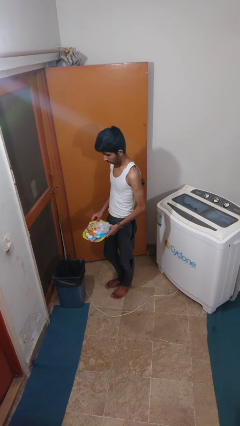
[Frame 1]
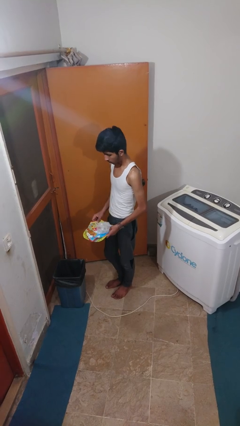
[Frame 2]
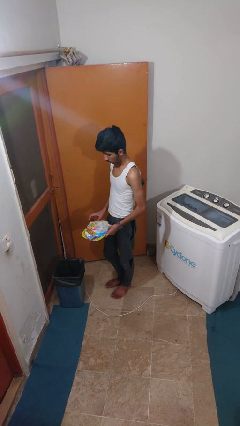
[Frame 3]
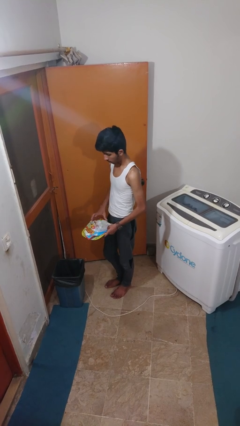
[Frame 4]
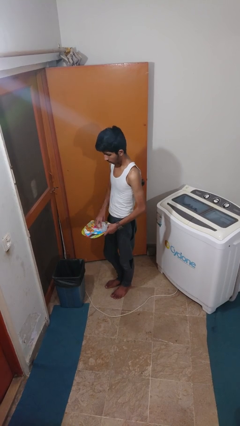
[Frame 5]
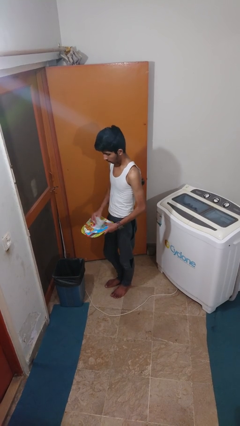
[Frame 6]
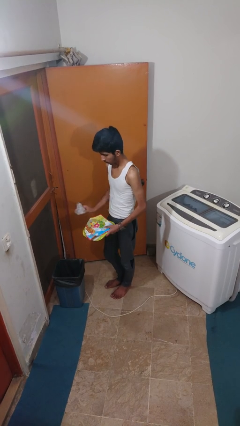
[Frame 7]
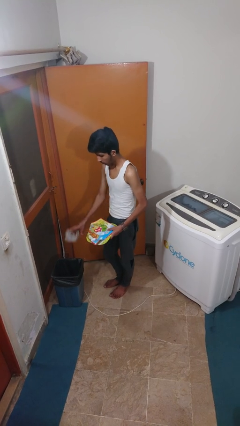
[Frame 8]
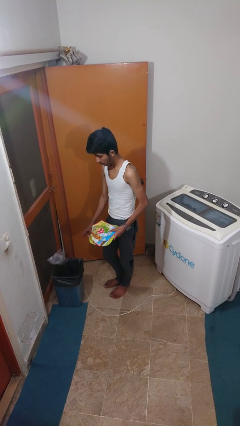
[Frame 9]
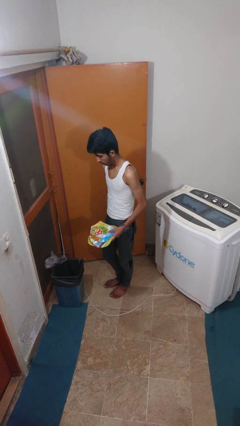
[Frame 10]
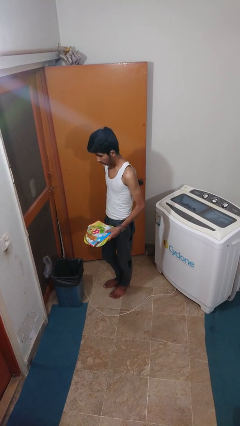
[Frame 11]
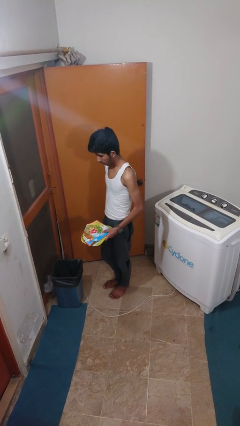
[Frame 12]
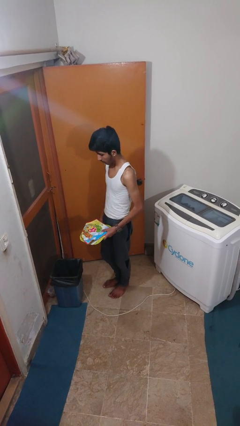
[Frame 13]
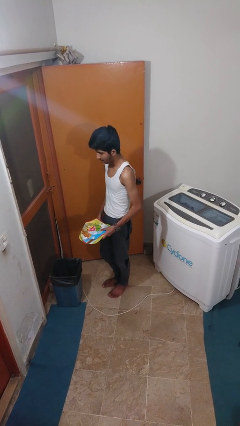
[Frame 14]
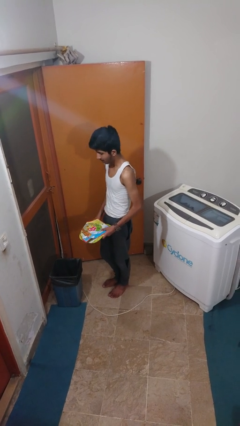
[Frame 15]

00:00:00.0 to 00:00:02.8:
person discards trash

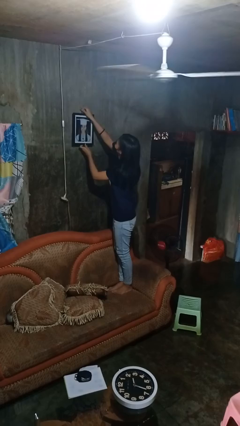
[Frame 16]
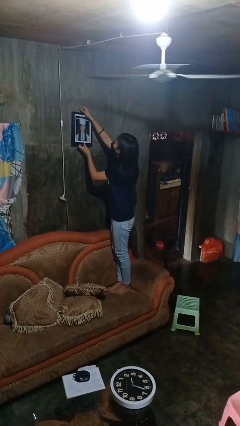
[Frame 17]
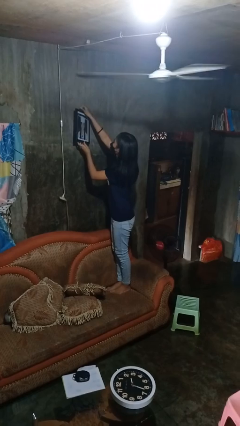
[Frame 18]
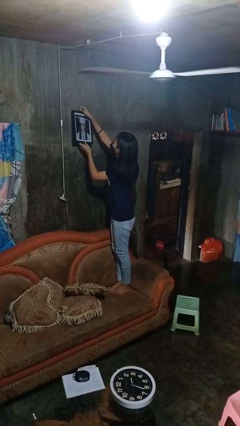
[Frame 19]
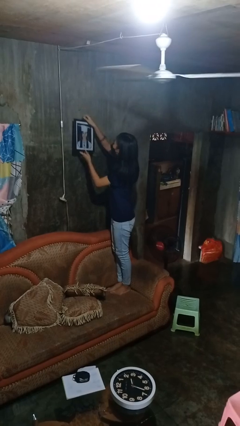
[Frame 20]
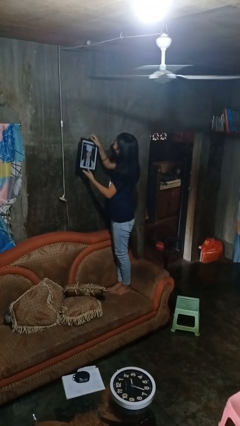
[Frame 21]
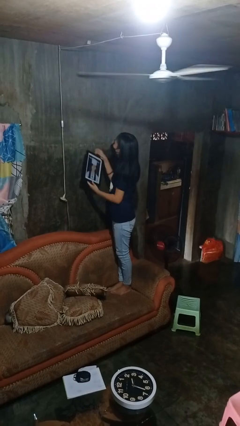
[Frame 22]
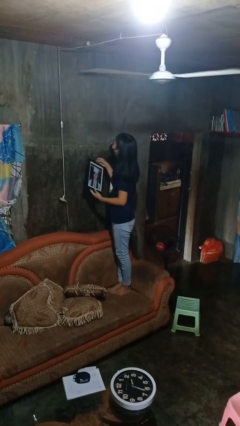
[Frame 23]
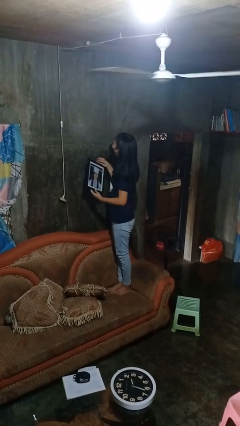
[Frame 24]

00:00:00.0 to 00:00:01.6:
person takes down picture frame

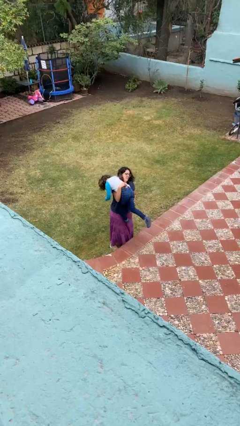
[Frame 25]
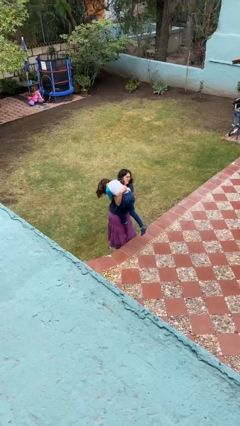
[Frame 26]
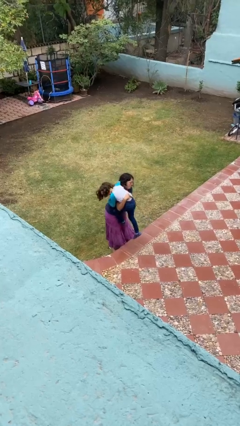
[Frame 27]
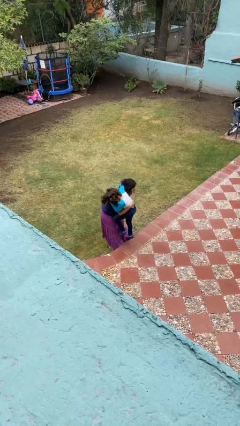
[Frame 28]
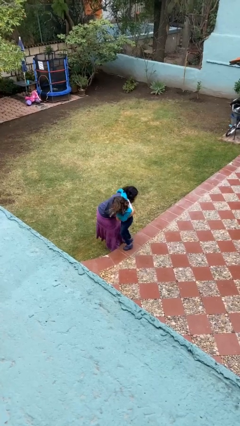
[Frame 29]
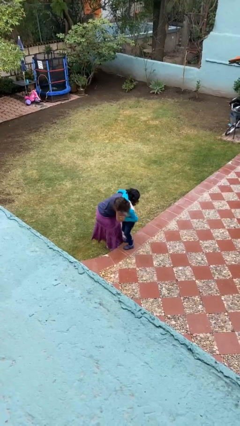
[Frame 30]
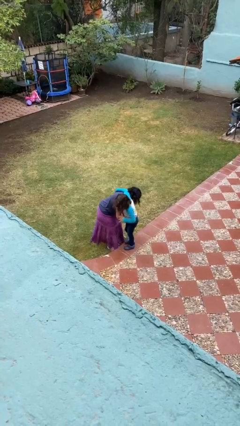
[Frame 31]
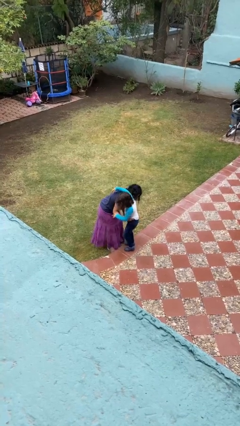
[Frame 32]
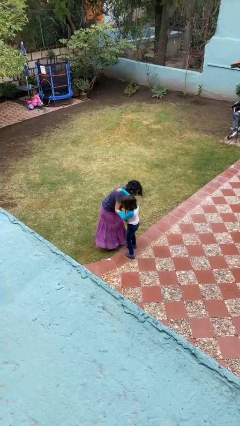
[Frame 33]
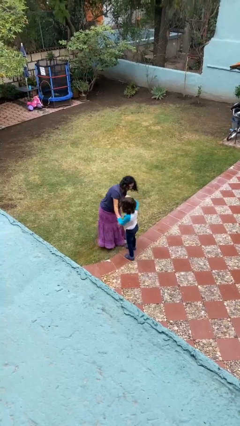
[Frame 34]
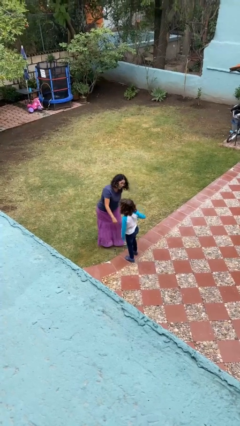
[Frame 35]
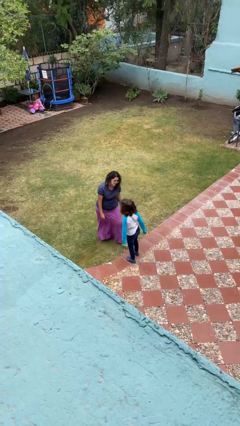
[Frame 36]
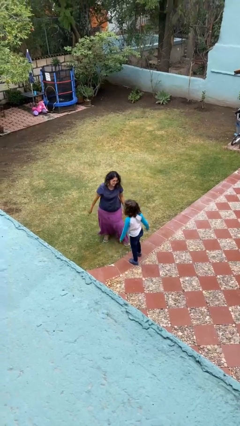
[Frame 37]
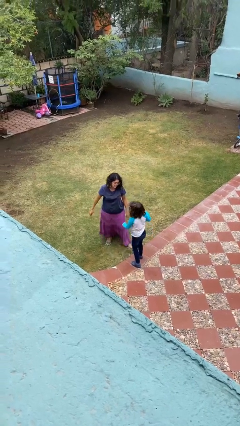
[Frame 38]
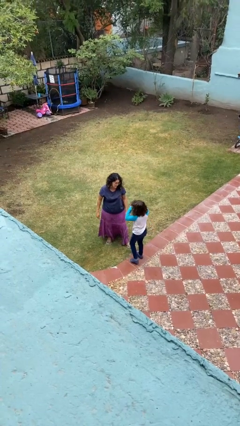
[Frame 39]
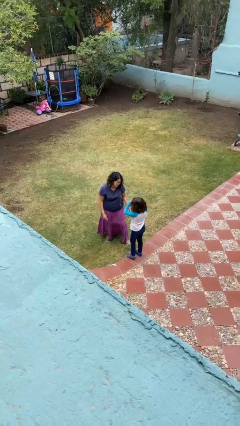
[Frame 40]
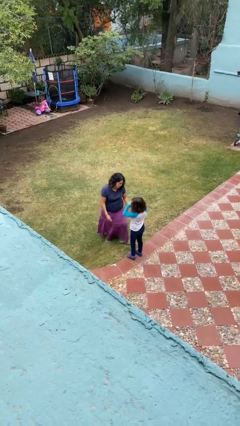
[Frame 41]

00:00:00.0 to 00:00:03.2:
person puts down person

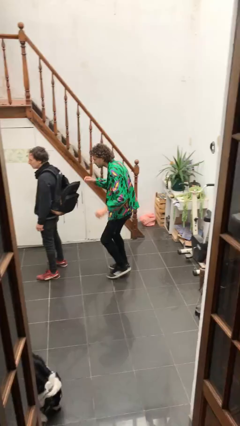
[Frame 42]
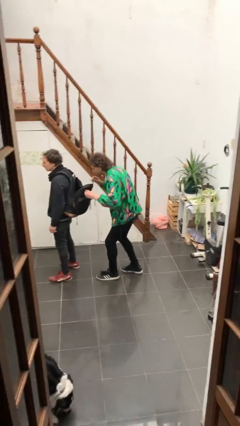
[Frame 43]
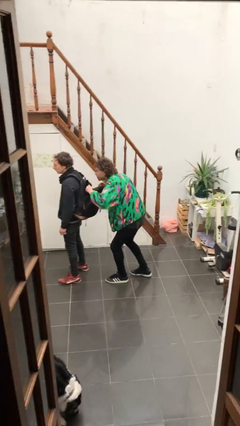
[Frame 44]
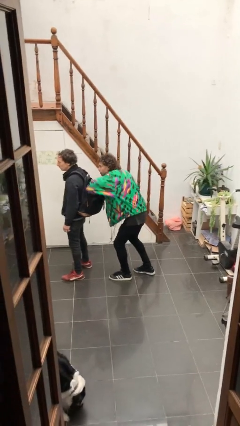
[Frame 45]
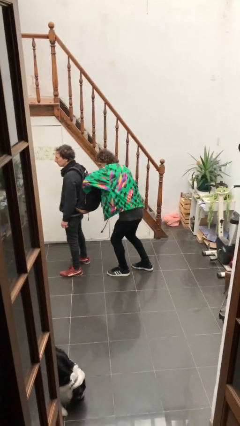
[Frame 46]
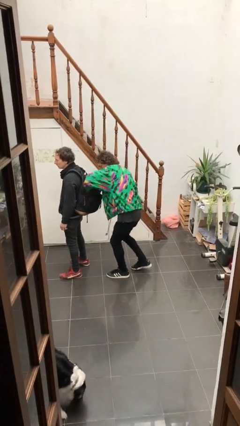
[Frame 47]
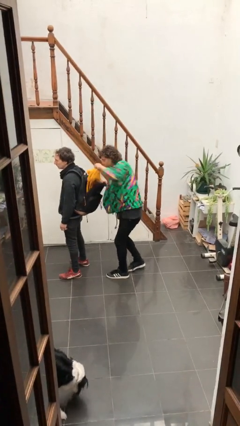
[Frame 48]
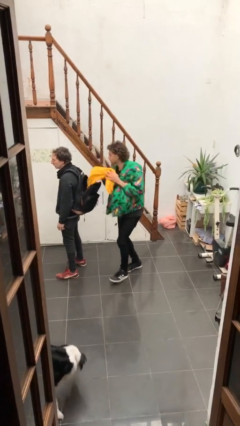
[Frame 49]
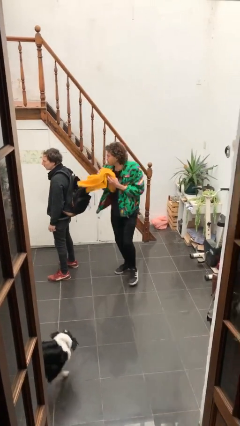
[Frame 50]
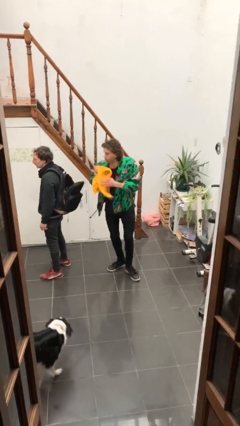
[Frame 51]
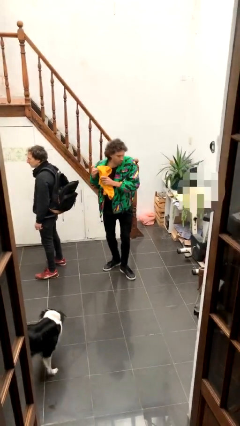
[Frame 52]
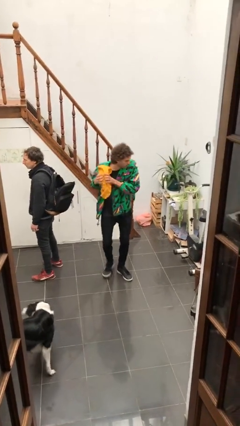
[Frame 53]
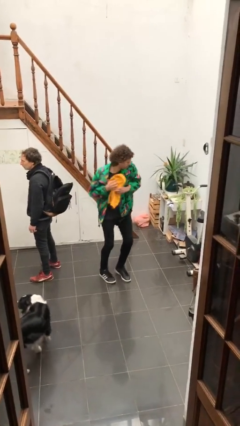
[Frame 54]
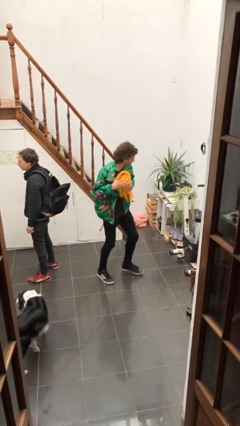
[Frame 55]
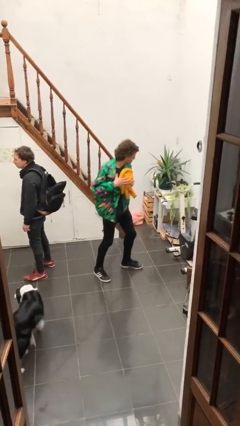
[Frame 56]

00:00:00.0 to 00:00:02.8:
person steals object from person

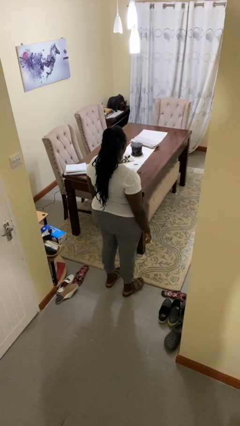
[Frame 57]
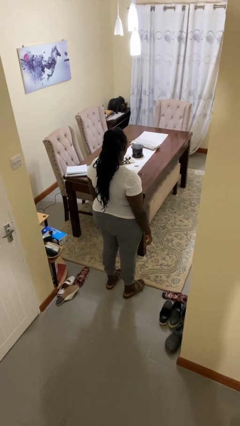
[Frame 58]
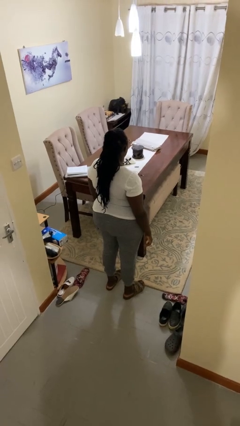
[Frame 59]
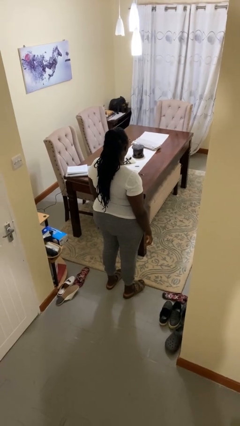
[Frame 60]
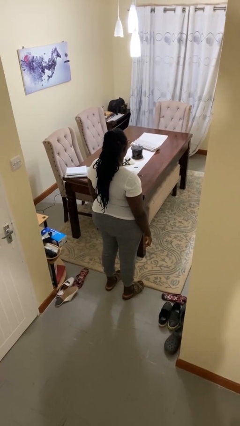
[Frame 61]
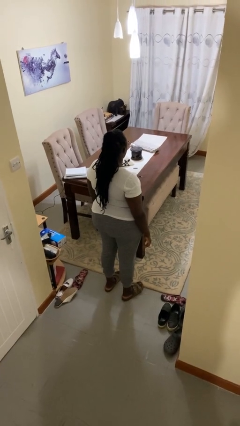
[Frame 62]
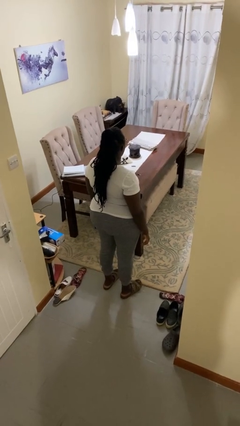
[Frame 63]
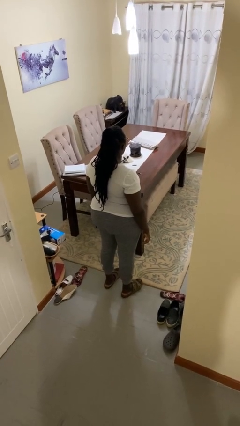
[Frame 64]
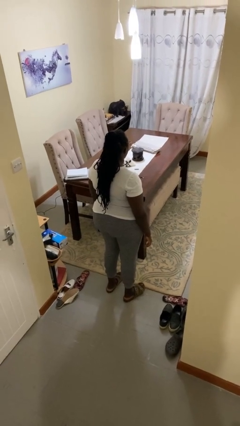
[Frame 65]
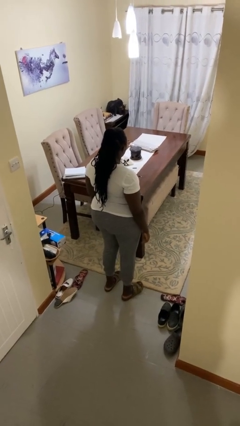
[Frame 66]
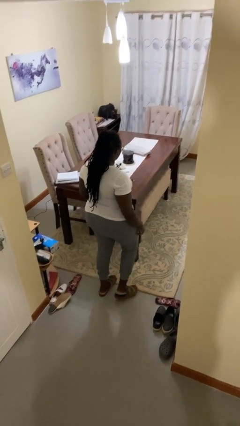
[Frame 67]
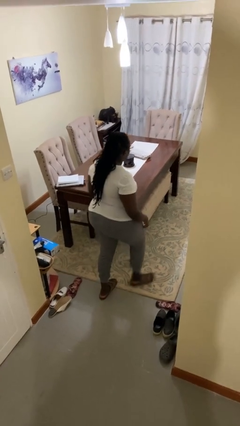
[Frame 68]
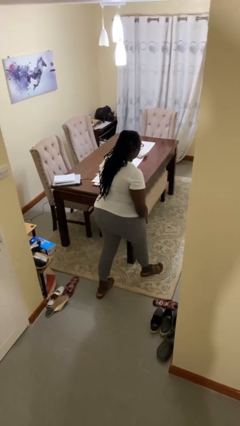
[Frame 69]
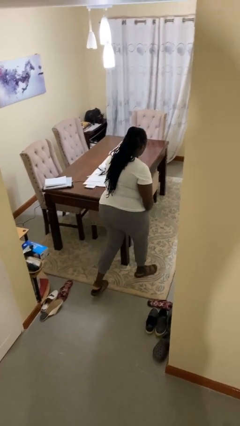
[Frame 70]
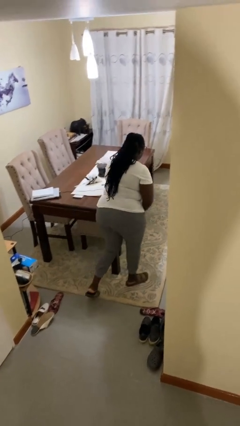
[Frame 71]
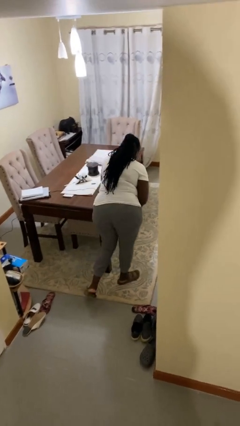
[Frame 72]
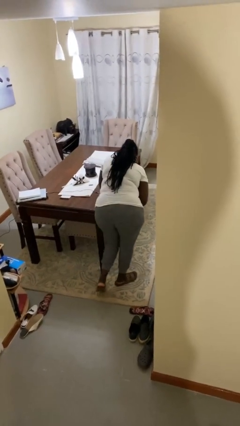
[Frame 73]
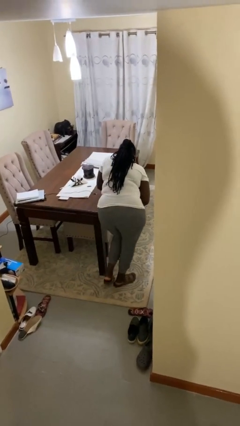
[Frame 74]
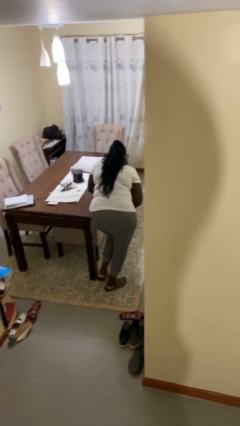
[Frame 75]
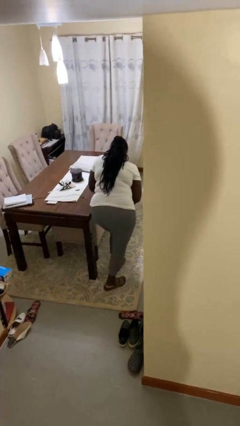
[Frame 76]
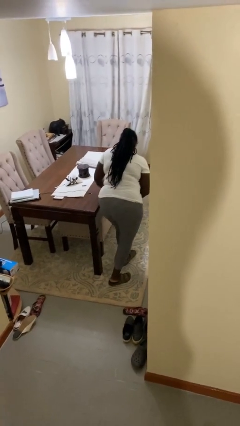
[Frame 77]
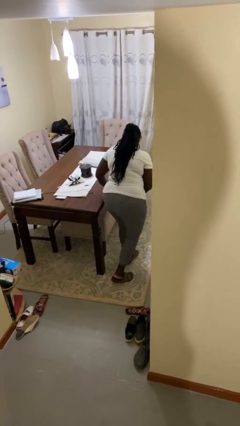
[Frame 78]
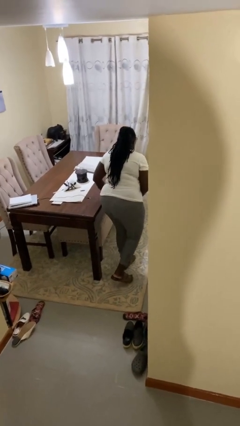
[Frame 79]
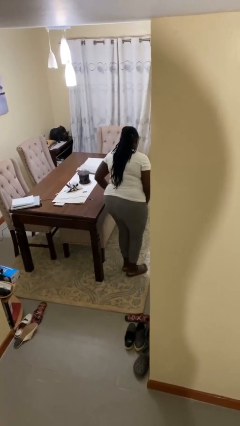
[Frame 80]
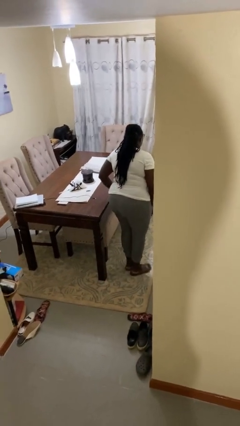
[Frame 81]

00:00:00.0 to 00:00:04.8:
person bumps into table

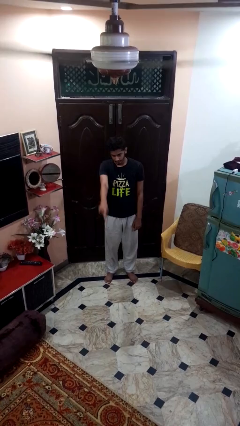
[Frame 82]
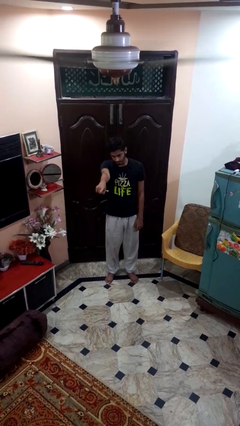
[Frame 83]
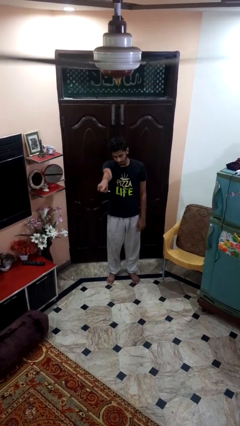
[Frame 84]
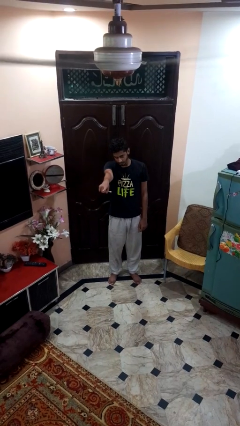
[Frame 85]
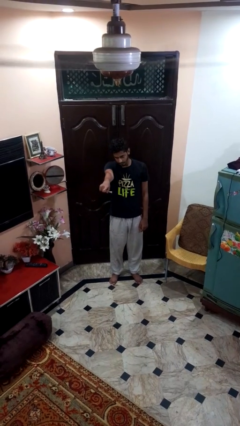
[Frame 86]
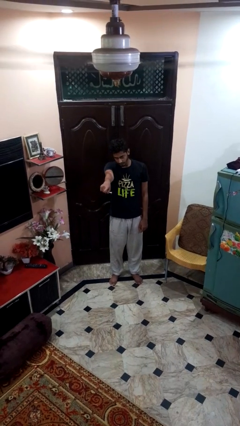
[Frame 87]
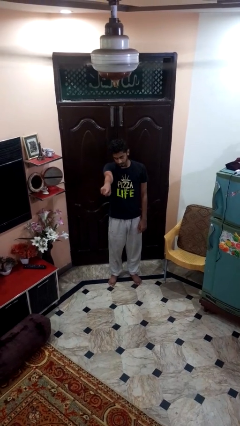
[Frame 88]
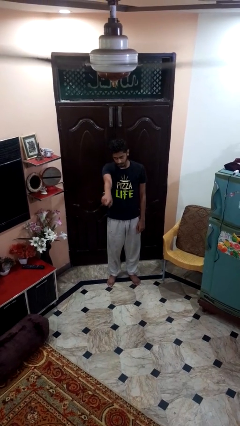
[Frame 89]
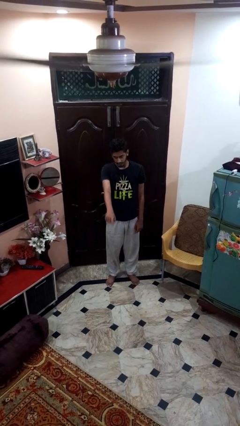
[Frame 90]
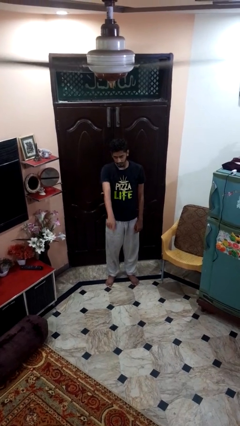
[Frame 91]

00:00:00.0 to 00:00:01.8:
person points at person
